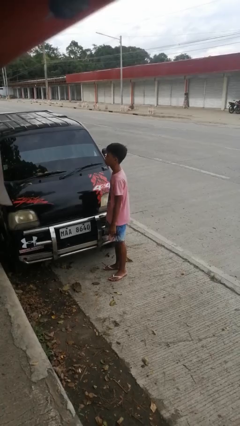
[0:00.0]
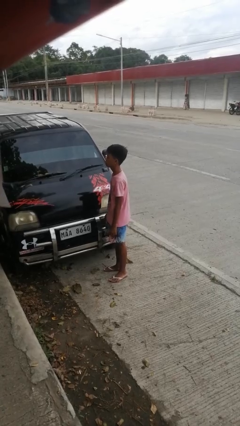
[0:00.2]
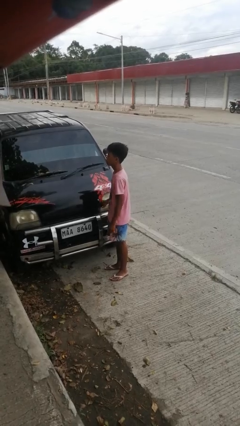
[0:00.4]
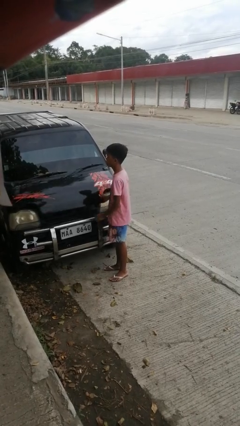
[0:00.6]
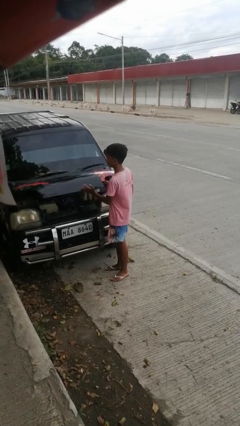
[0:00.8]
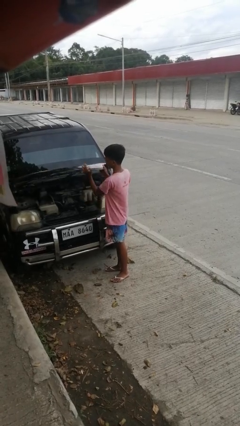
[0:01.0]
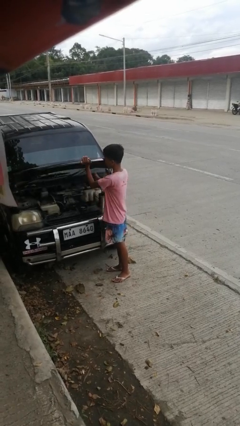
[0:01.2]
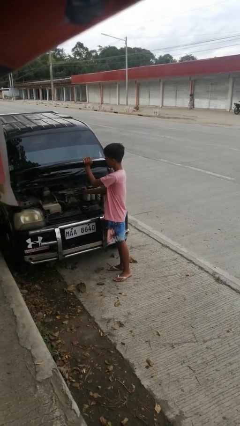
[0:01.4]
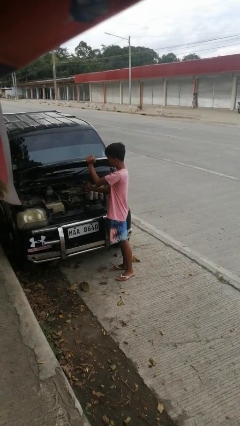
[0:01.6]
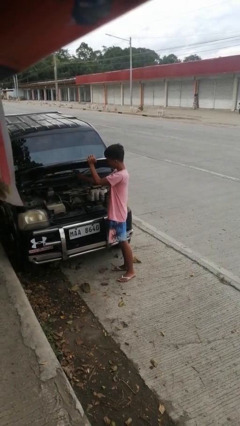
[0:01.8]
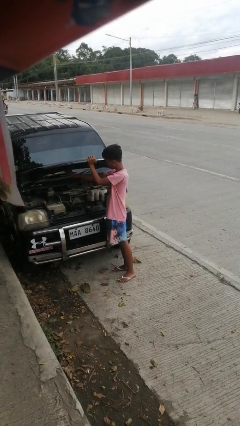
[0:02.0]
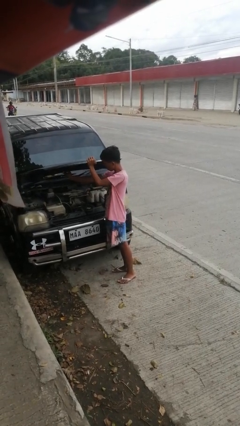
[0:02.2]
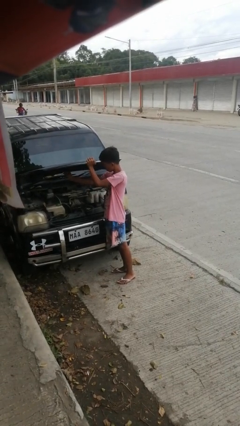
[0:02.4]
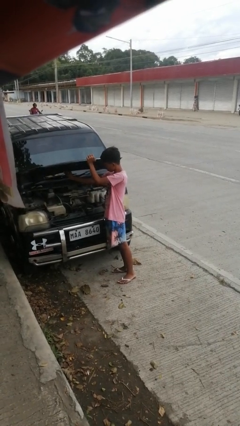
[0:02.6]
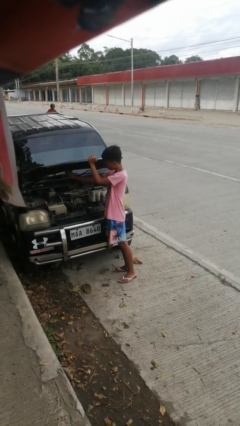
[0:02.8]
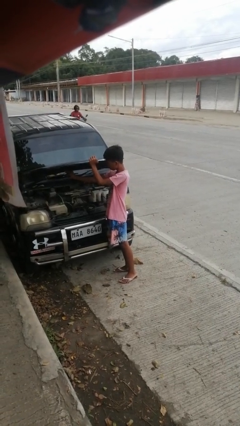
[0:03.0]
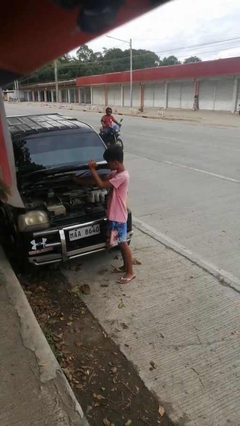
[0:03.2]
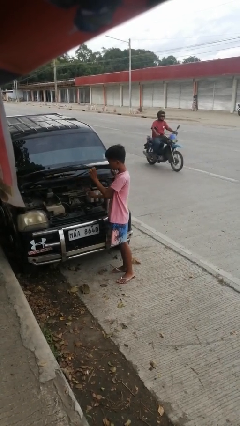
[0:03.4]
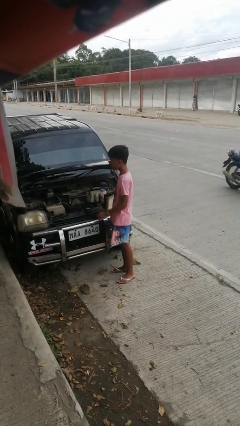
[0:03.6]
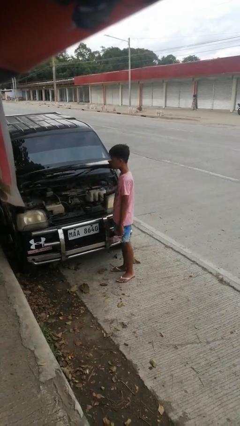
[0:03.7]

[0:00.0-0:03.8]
person opens car hood

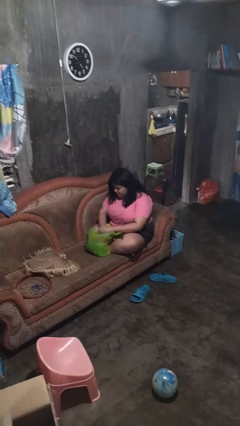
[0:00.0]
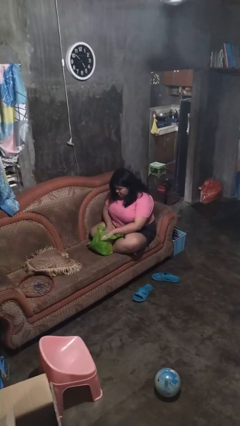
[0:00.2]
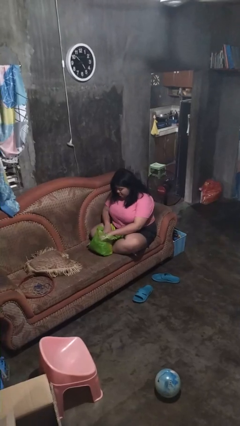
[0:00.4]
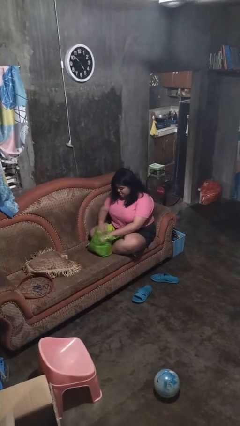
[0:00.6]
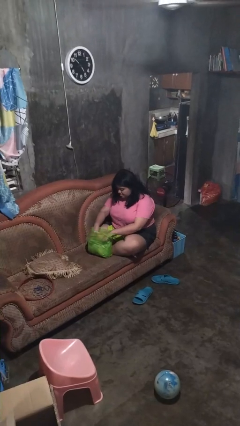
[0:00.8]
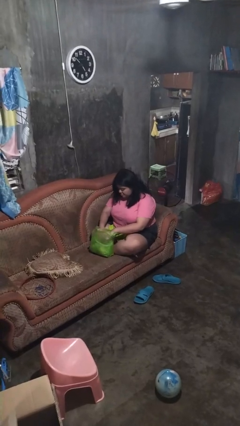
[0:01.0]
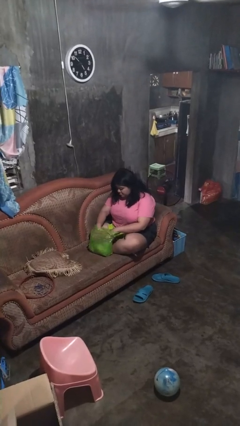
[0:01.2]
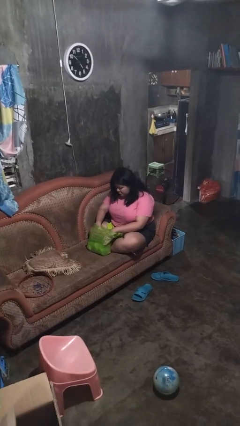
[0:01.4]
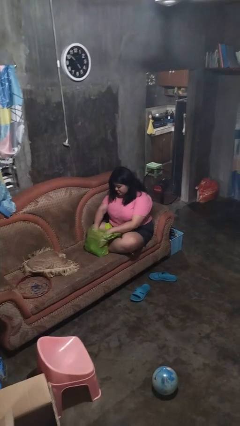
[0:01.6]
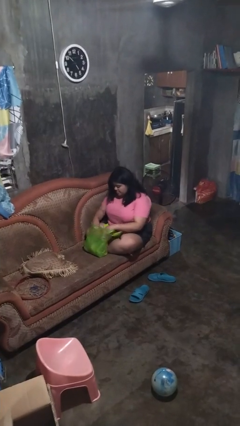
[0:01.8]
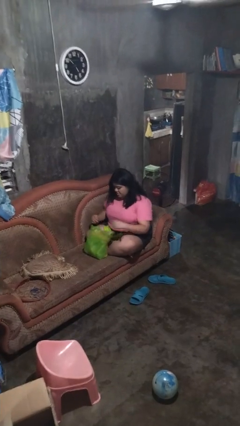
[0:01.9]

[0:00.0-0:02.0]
person searches in bag

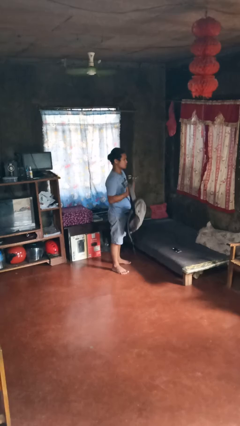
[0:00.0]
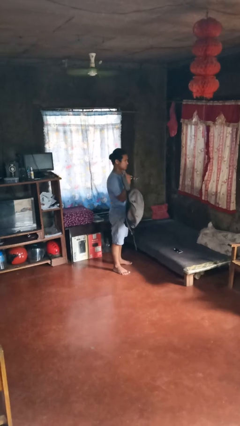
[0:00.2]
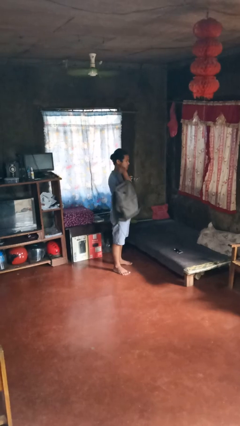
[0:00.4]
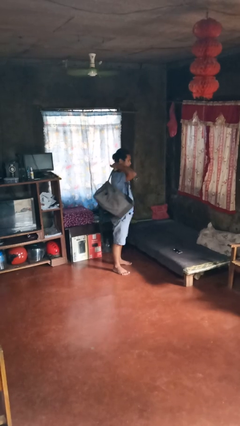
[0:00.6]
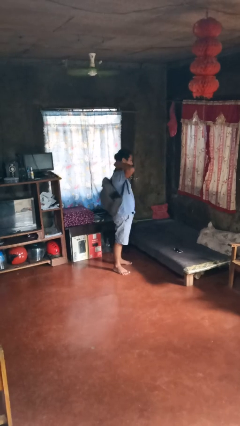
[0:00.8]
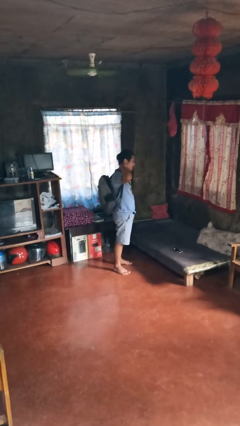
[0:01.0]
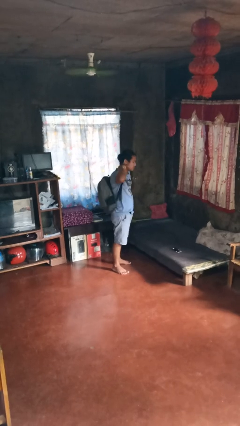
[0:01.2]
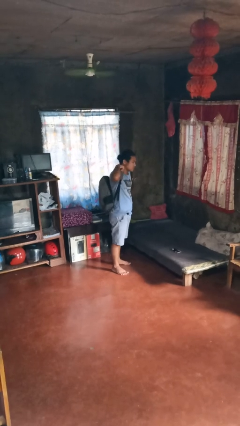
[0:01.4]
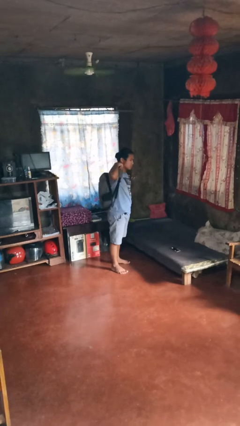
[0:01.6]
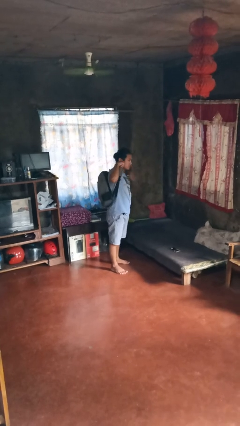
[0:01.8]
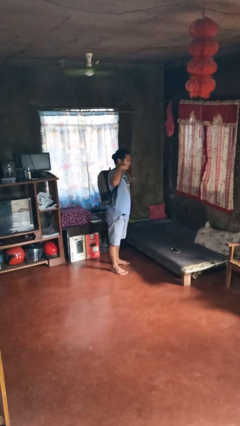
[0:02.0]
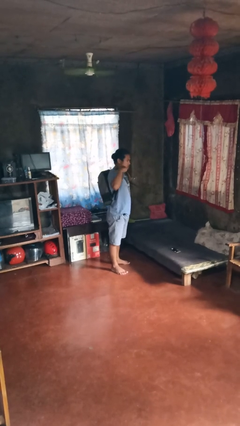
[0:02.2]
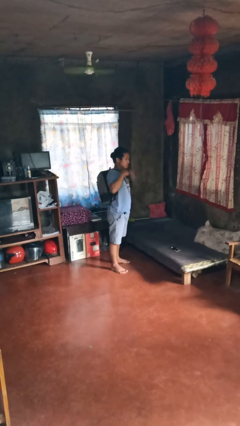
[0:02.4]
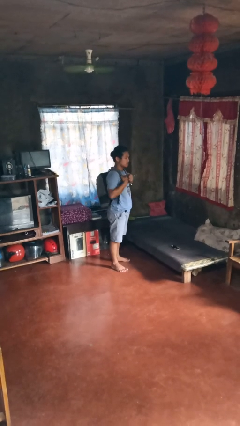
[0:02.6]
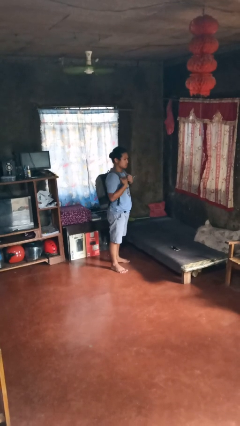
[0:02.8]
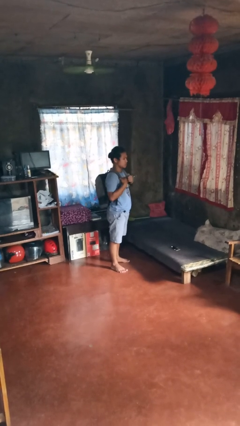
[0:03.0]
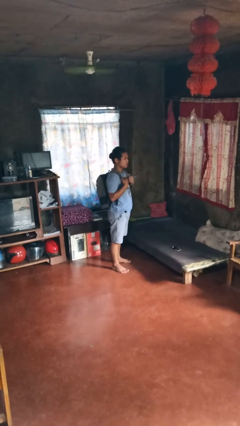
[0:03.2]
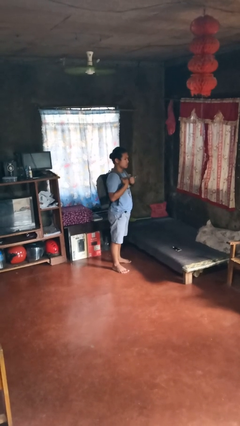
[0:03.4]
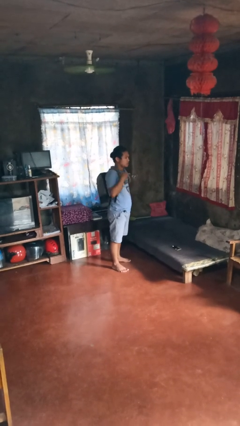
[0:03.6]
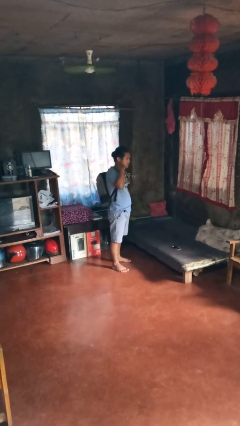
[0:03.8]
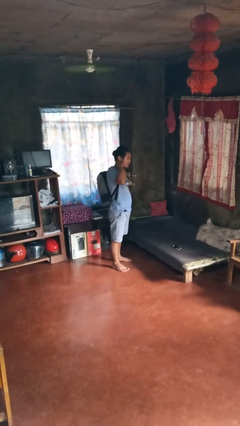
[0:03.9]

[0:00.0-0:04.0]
person puts on backpack

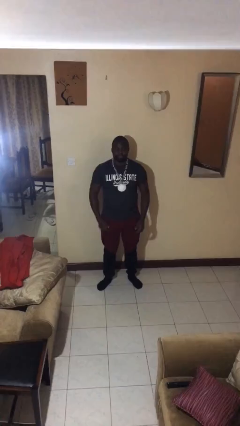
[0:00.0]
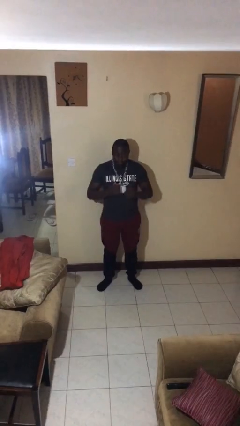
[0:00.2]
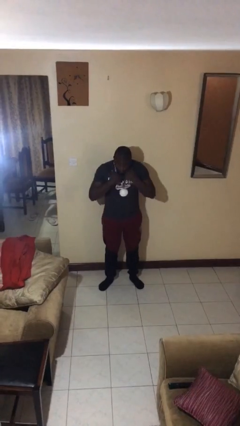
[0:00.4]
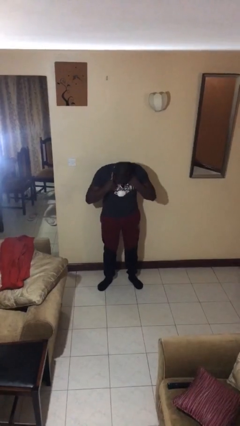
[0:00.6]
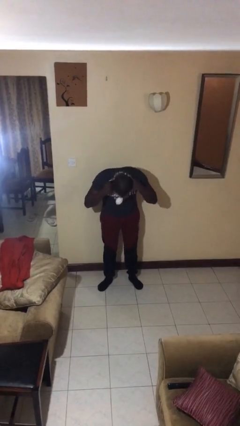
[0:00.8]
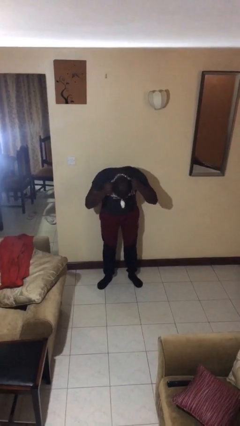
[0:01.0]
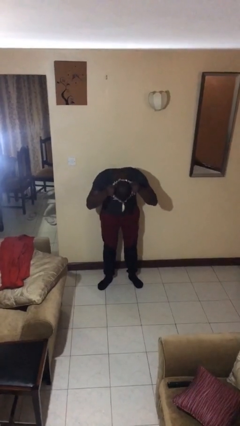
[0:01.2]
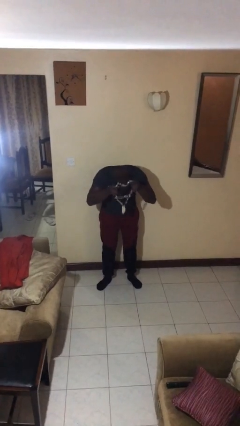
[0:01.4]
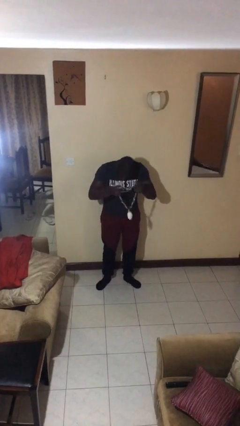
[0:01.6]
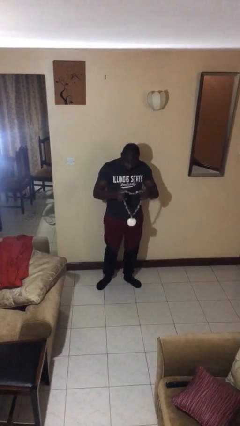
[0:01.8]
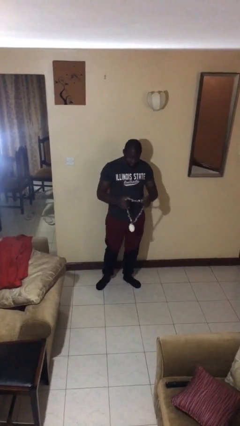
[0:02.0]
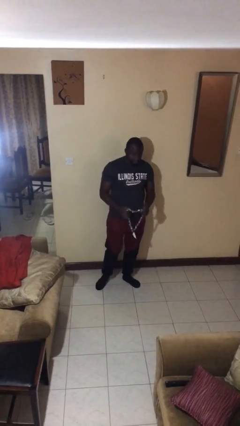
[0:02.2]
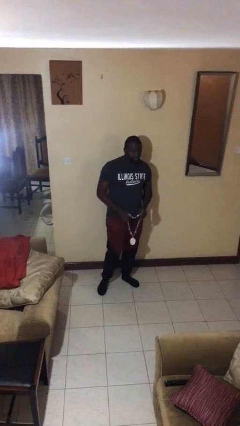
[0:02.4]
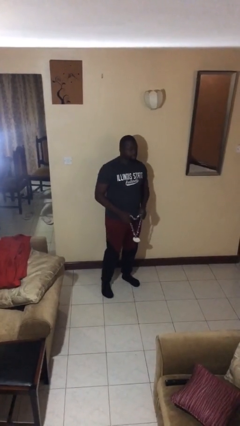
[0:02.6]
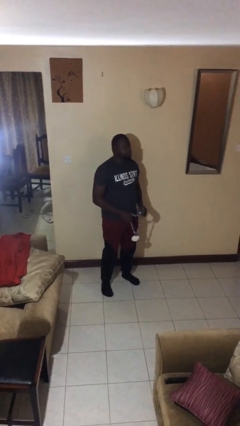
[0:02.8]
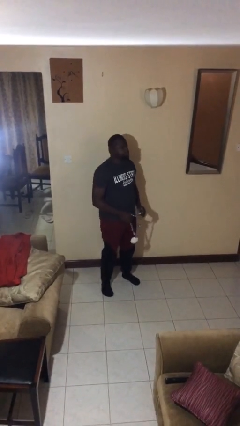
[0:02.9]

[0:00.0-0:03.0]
person takes off necklace

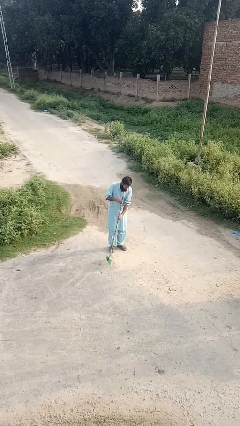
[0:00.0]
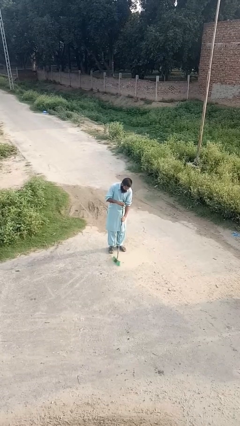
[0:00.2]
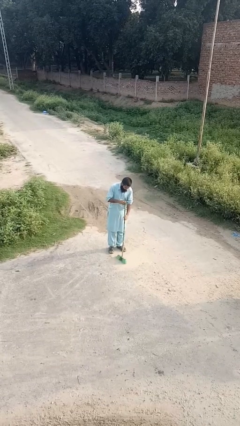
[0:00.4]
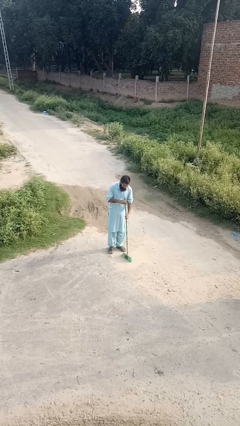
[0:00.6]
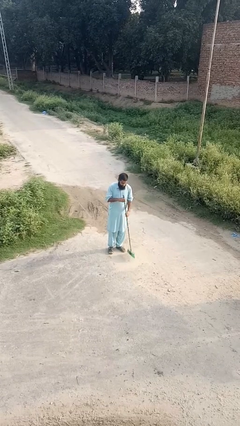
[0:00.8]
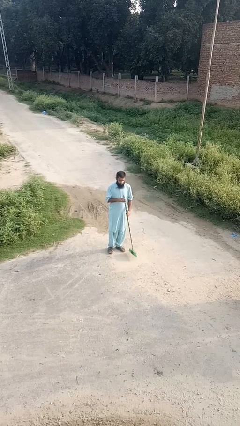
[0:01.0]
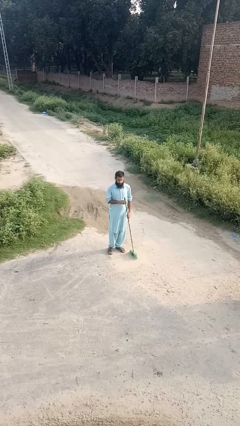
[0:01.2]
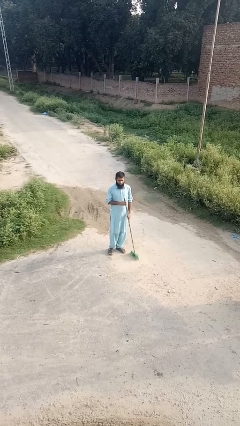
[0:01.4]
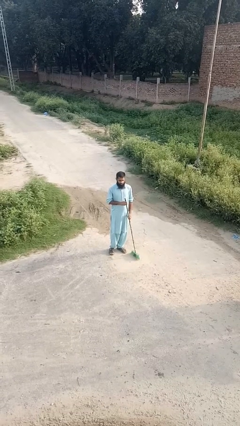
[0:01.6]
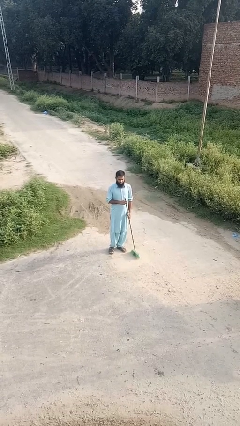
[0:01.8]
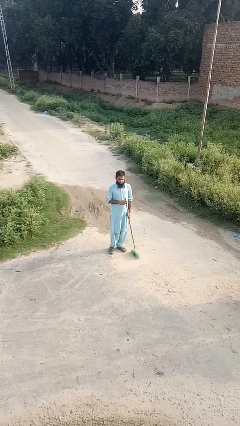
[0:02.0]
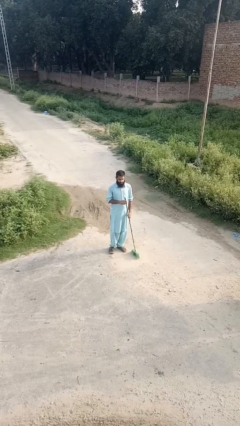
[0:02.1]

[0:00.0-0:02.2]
person sweeps floor

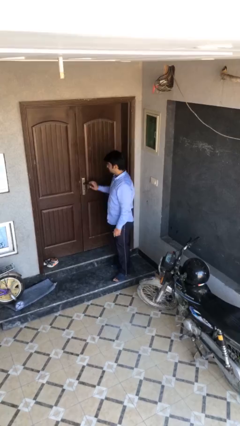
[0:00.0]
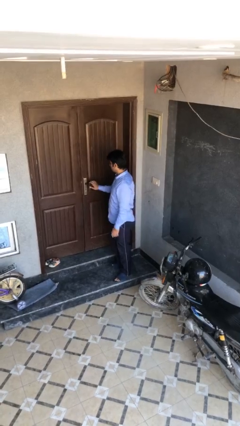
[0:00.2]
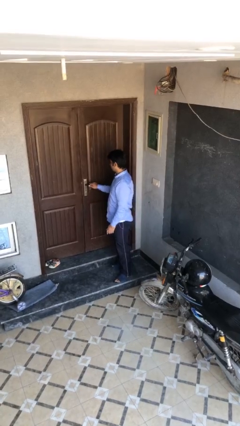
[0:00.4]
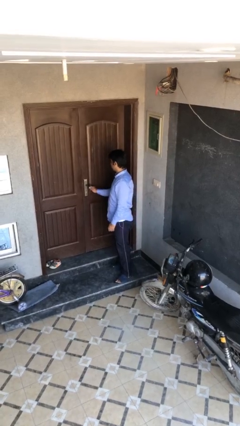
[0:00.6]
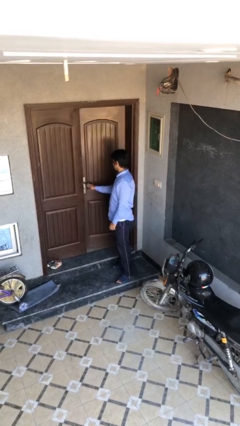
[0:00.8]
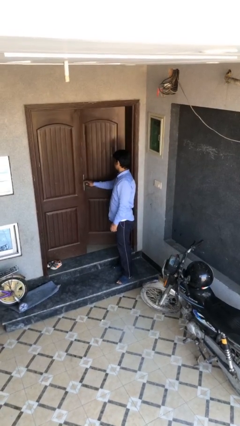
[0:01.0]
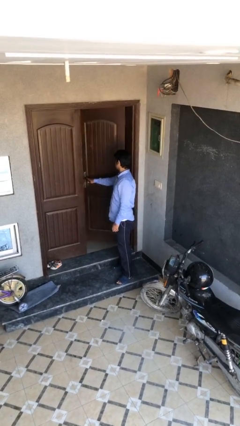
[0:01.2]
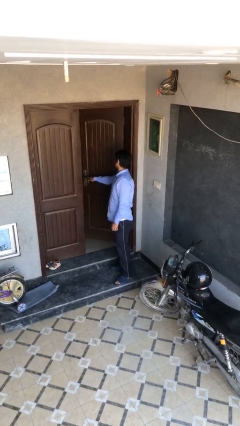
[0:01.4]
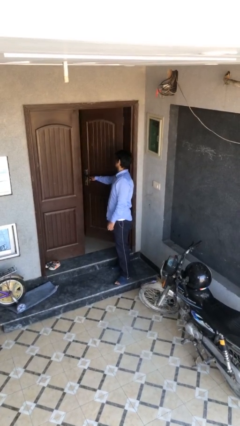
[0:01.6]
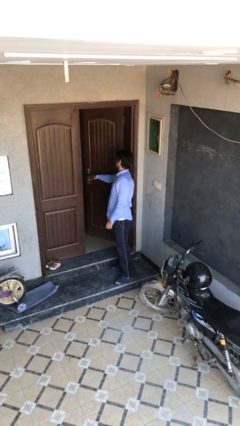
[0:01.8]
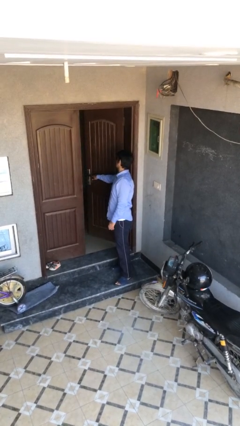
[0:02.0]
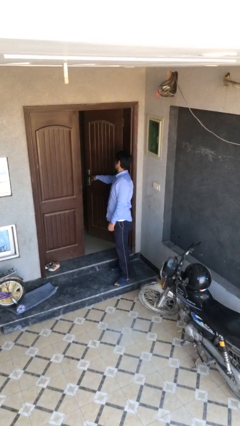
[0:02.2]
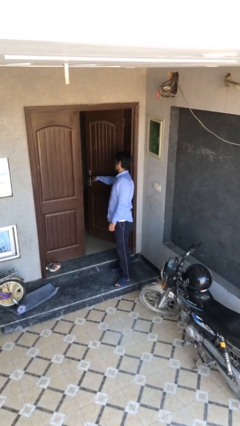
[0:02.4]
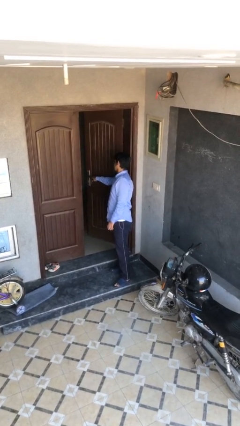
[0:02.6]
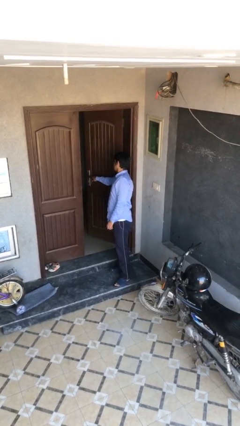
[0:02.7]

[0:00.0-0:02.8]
person opens facility door
